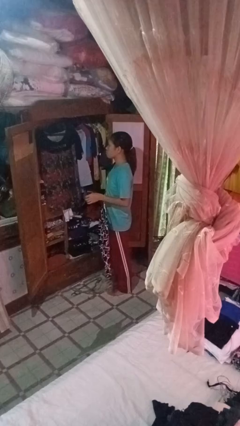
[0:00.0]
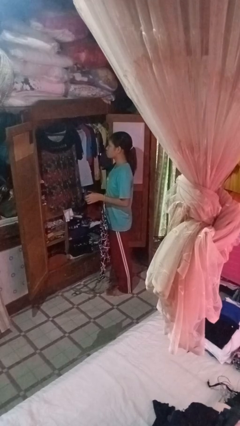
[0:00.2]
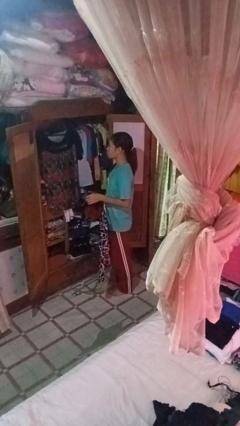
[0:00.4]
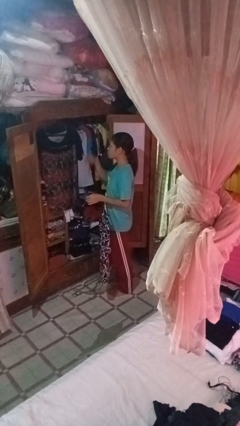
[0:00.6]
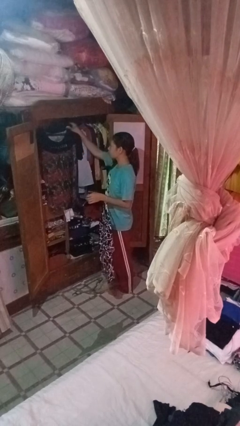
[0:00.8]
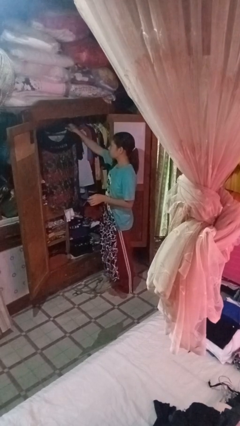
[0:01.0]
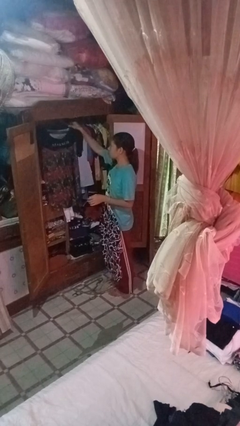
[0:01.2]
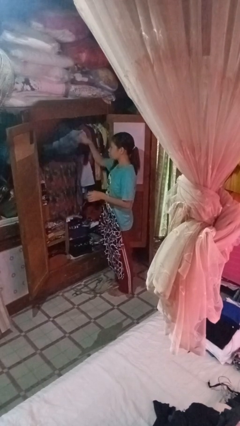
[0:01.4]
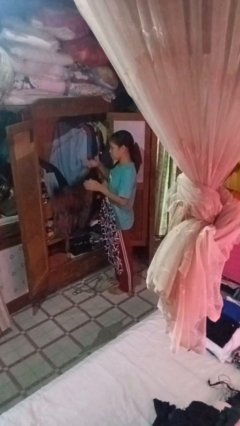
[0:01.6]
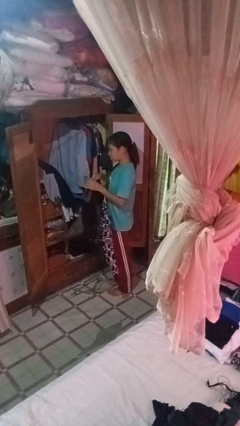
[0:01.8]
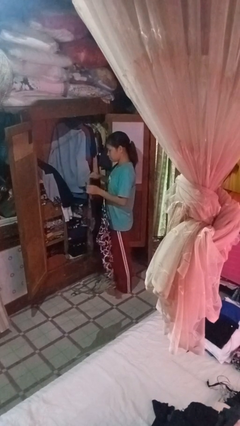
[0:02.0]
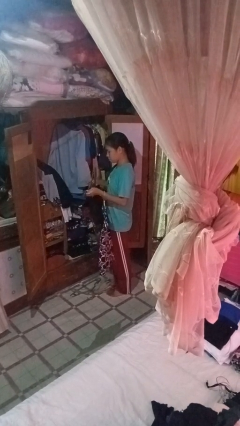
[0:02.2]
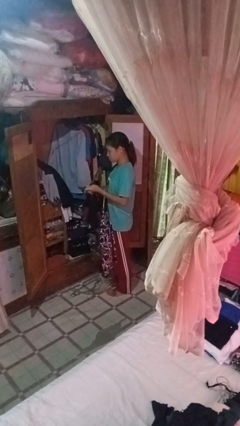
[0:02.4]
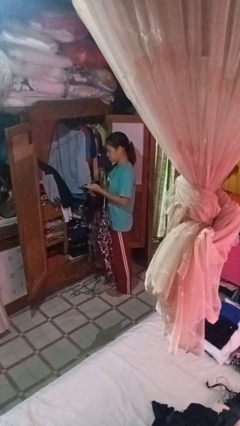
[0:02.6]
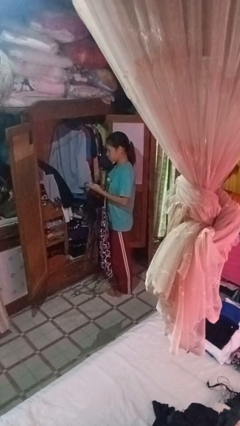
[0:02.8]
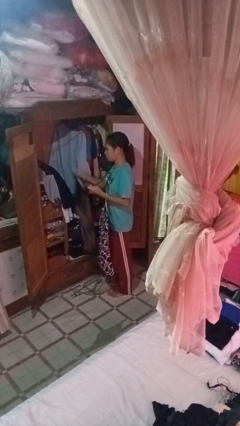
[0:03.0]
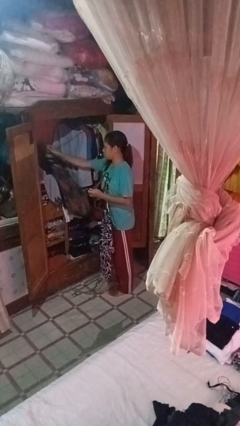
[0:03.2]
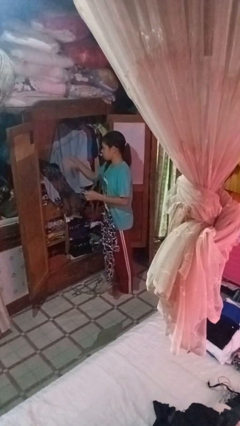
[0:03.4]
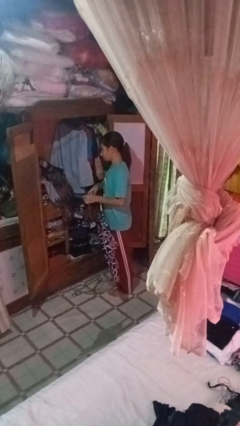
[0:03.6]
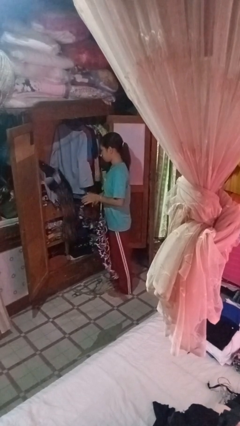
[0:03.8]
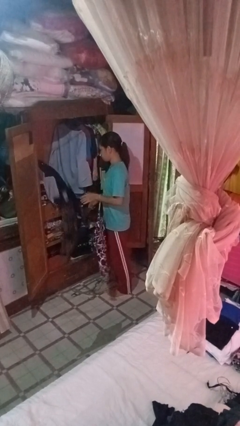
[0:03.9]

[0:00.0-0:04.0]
person takes clothes from closet

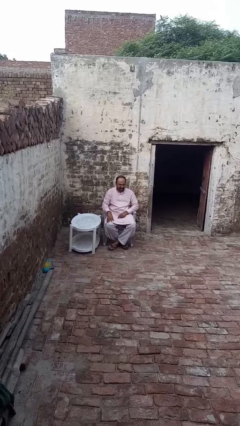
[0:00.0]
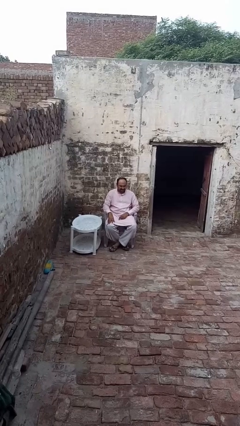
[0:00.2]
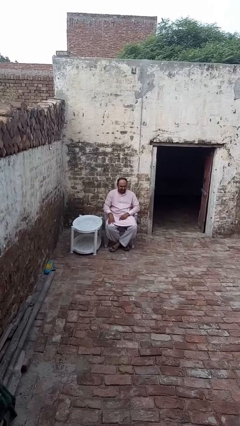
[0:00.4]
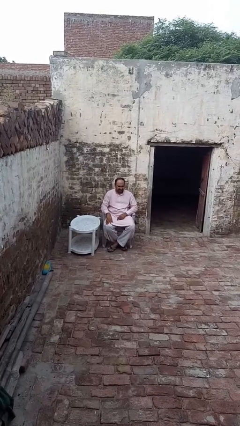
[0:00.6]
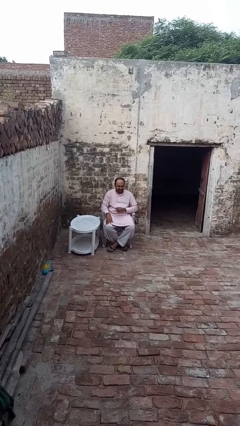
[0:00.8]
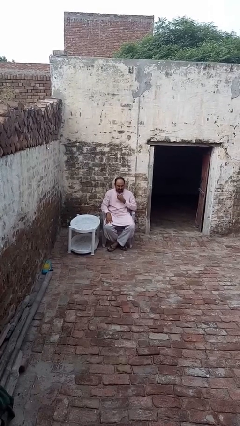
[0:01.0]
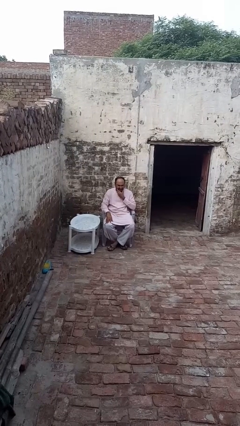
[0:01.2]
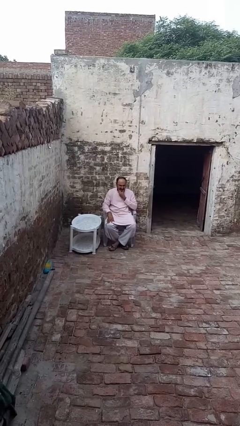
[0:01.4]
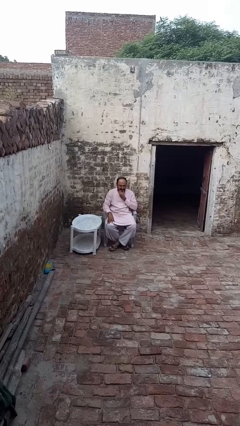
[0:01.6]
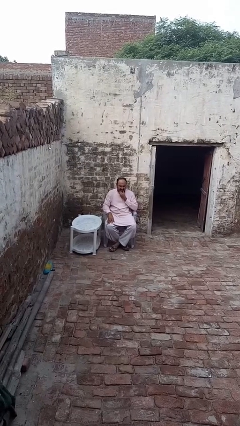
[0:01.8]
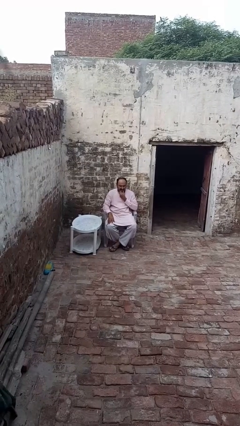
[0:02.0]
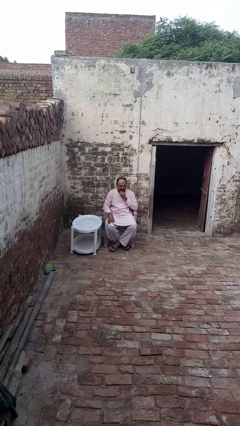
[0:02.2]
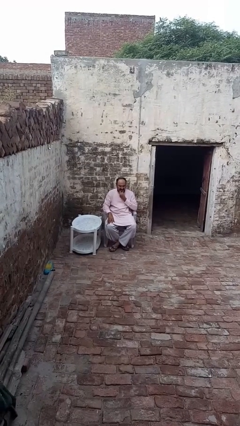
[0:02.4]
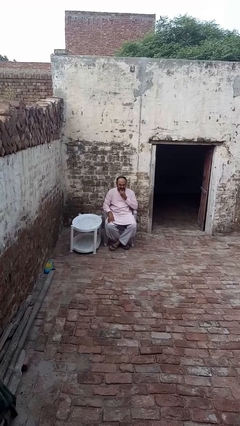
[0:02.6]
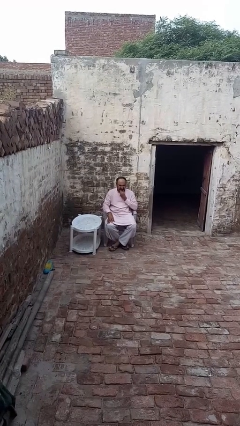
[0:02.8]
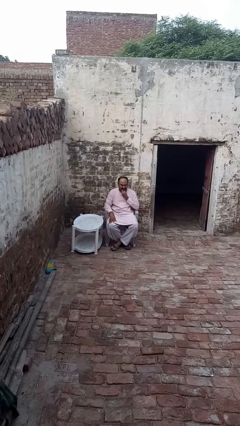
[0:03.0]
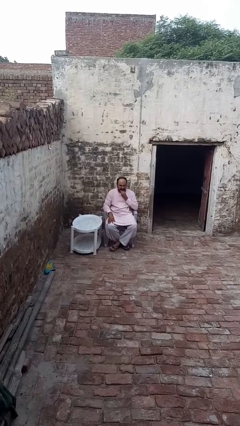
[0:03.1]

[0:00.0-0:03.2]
person strokes chin

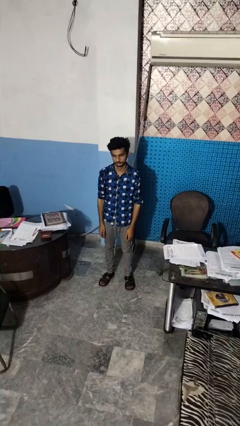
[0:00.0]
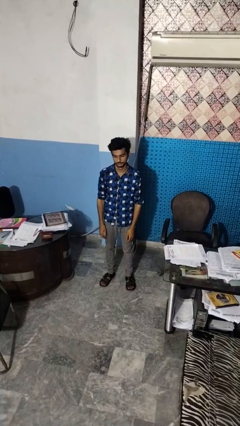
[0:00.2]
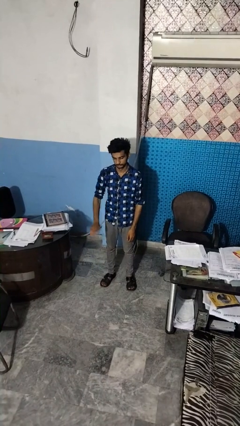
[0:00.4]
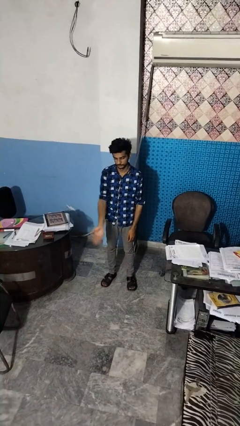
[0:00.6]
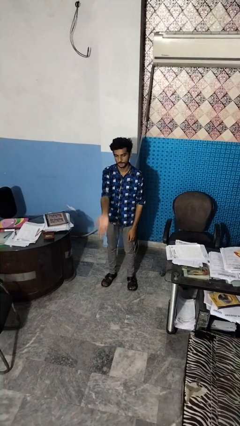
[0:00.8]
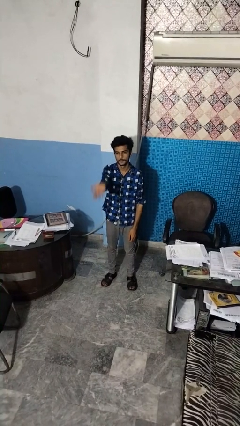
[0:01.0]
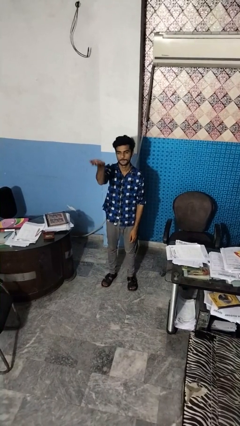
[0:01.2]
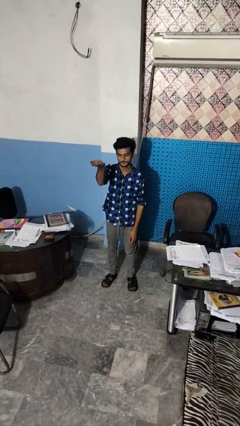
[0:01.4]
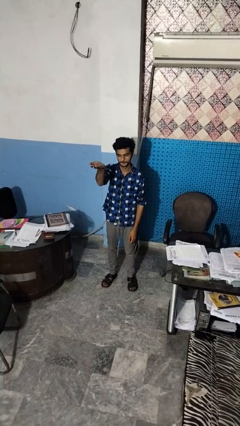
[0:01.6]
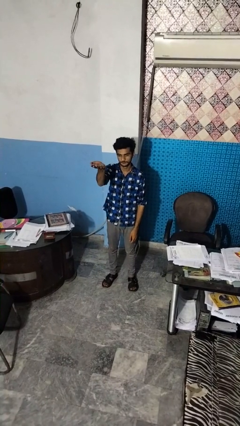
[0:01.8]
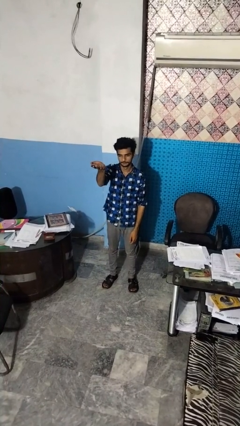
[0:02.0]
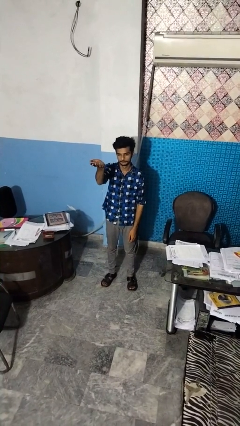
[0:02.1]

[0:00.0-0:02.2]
person gestures swipe up

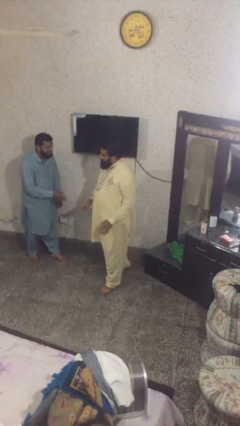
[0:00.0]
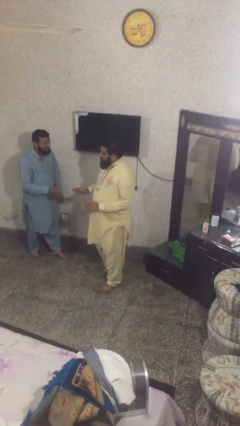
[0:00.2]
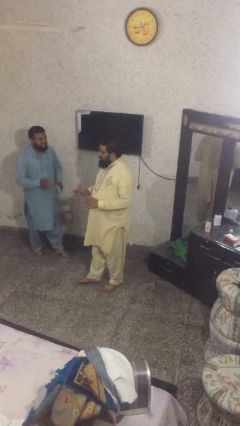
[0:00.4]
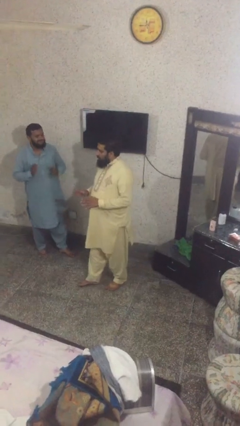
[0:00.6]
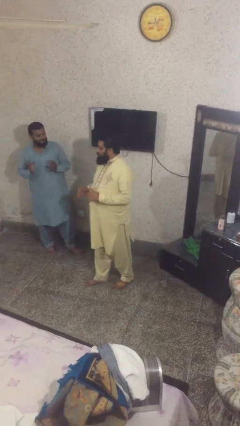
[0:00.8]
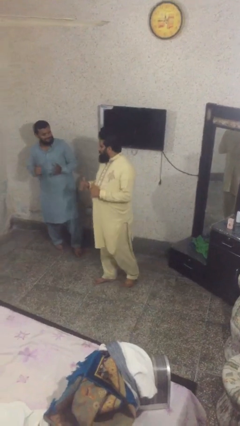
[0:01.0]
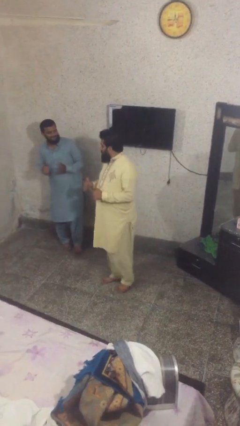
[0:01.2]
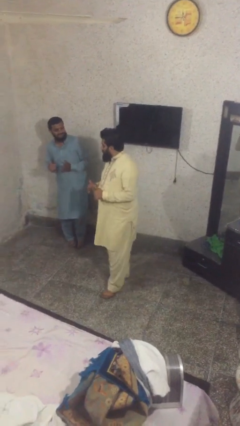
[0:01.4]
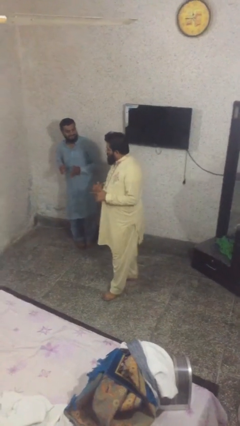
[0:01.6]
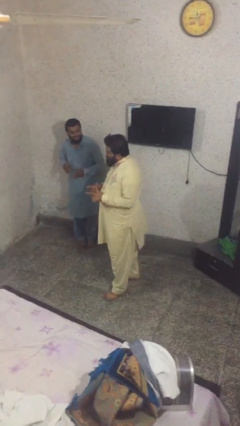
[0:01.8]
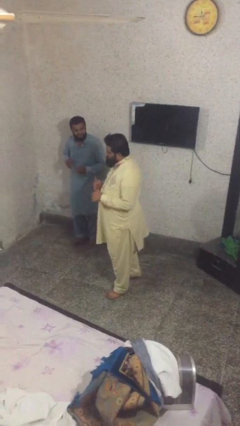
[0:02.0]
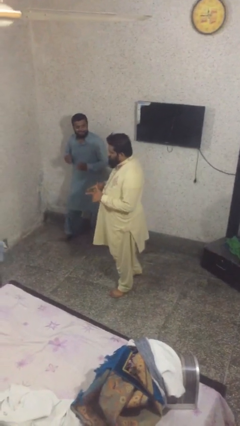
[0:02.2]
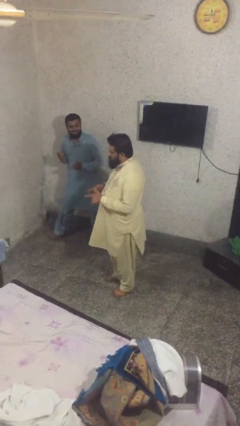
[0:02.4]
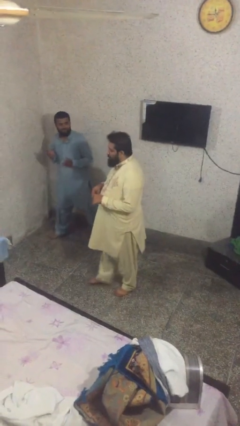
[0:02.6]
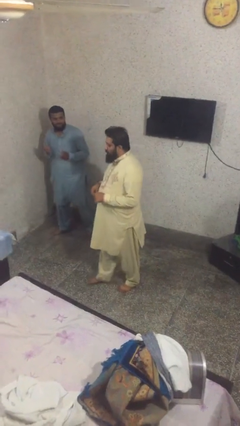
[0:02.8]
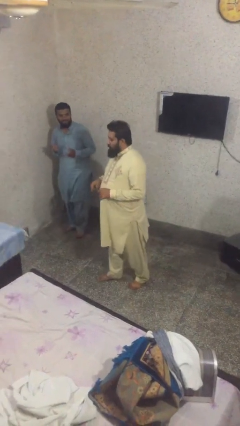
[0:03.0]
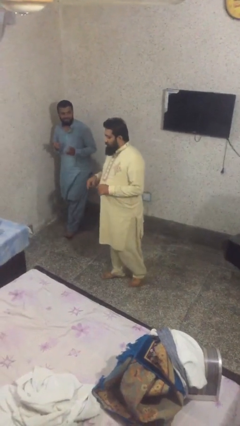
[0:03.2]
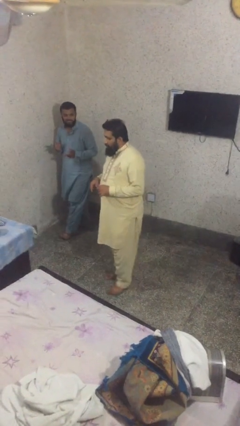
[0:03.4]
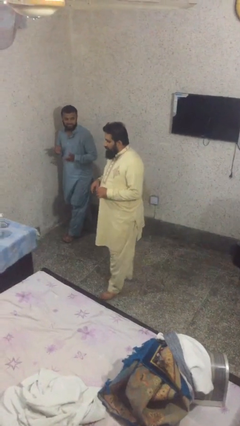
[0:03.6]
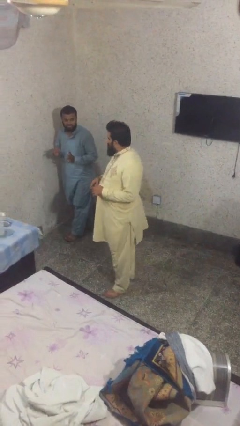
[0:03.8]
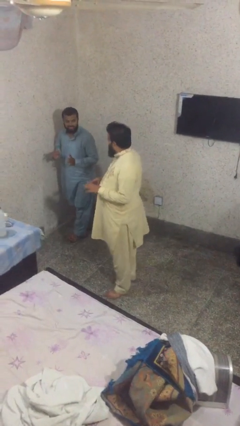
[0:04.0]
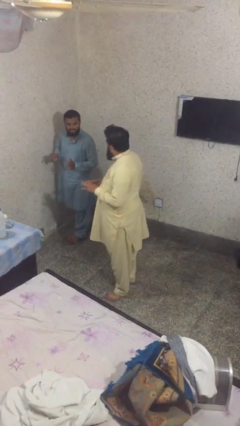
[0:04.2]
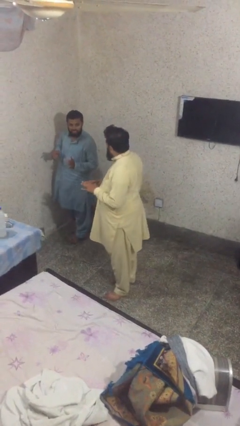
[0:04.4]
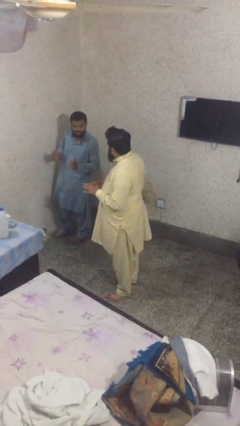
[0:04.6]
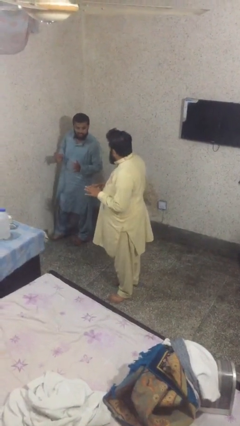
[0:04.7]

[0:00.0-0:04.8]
person talks to person

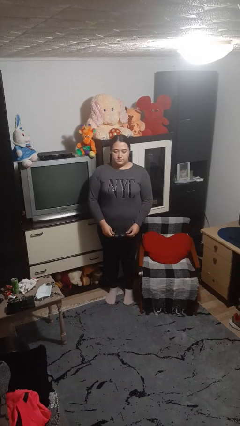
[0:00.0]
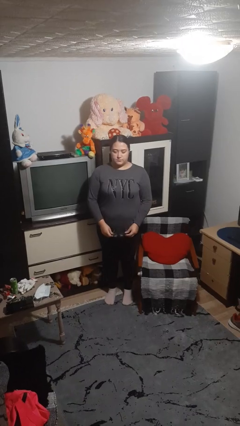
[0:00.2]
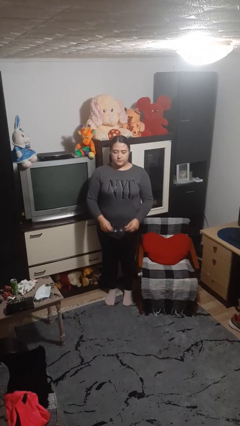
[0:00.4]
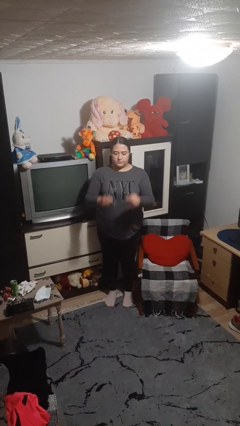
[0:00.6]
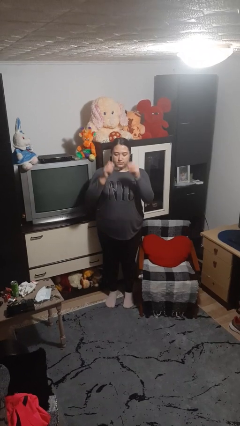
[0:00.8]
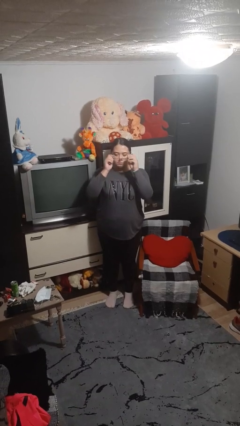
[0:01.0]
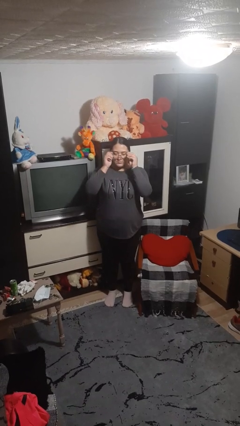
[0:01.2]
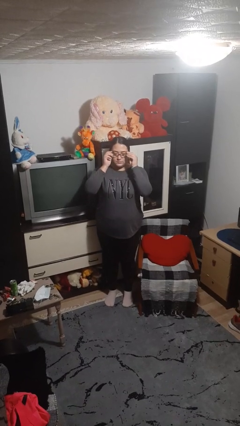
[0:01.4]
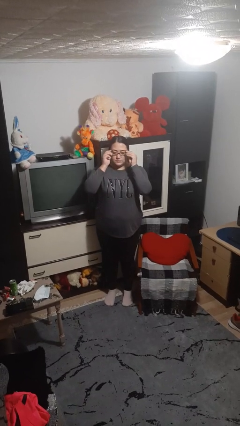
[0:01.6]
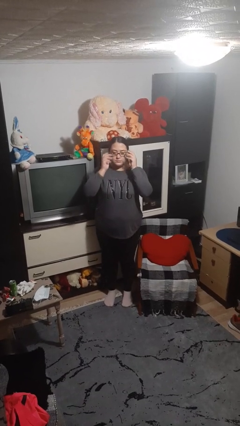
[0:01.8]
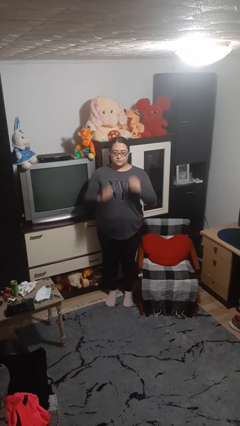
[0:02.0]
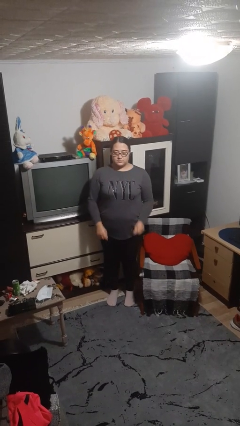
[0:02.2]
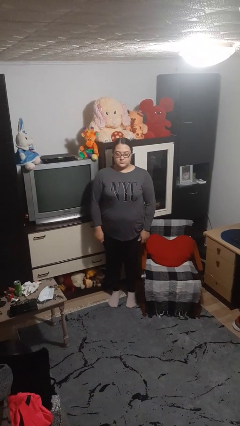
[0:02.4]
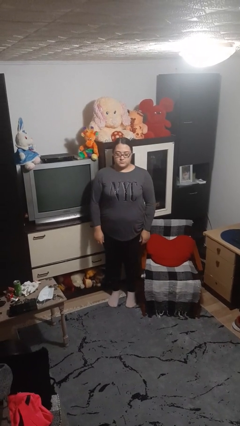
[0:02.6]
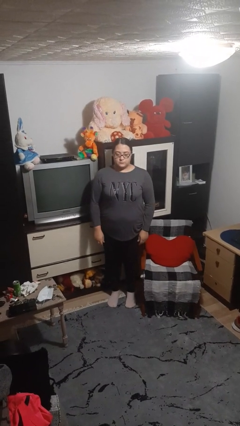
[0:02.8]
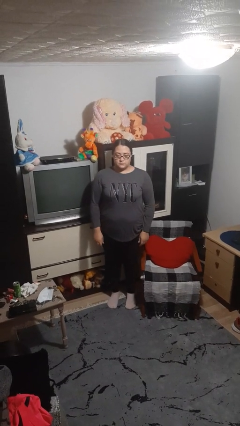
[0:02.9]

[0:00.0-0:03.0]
person puts on glasses
